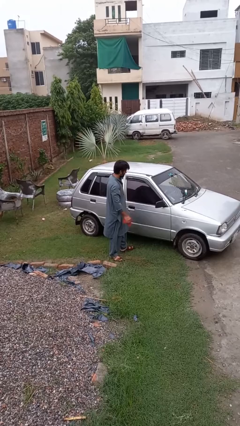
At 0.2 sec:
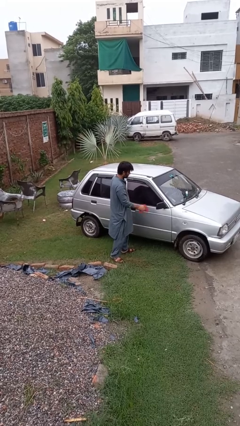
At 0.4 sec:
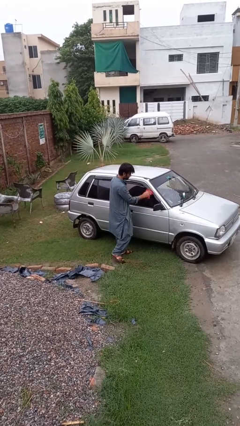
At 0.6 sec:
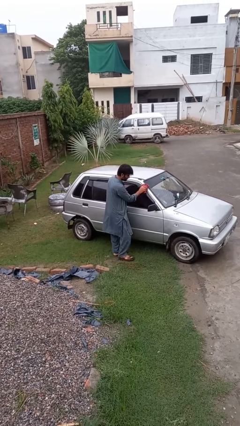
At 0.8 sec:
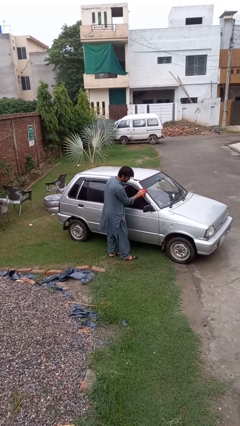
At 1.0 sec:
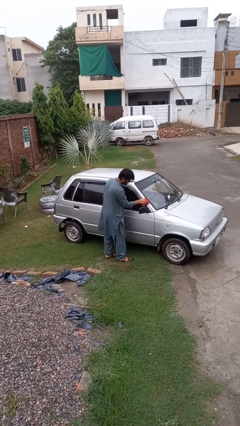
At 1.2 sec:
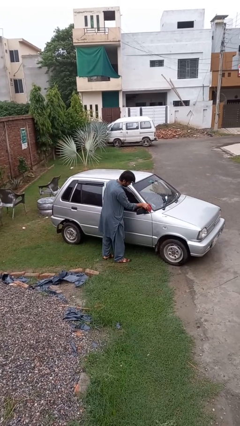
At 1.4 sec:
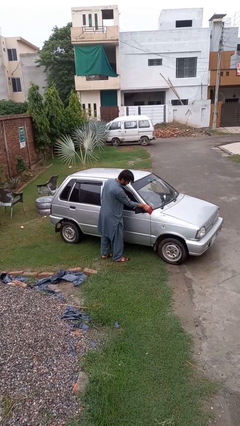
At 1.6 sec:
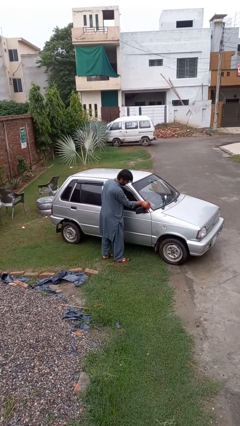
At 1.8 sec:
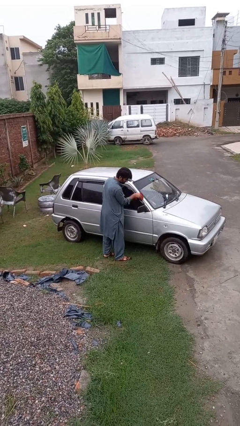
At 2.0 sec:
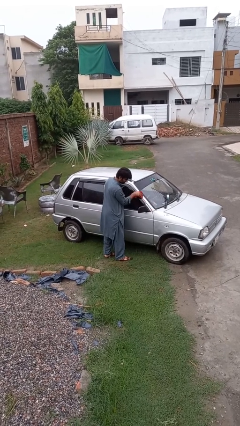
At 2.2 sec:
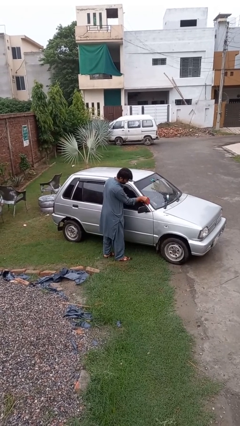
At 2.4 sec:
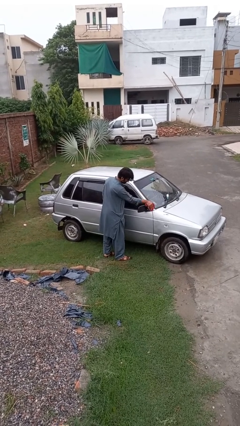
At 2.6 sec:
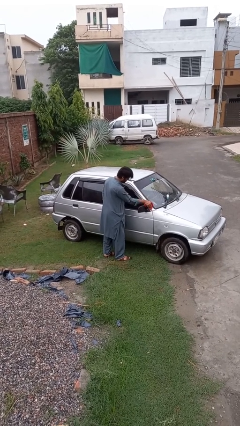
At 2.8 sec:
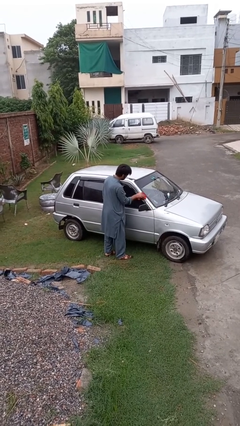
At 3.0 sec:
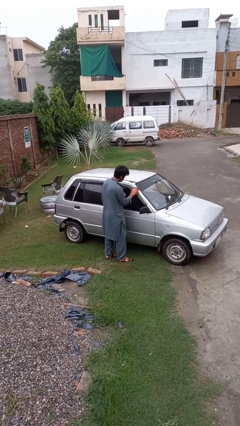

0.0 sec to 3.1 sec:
person polishes car with rag

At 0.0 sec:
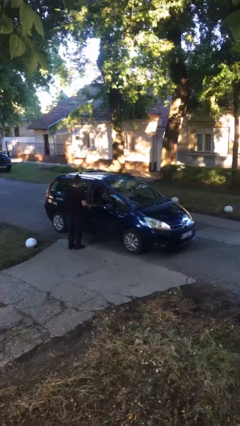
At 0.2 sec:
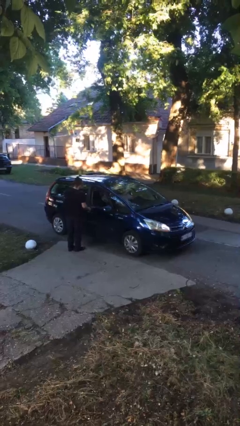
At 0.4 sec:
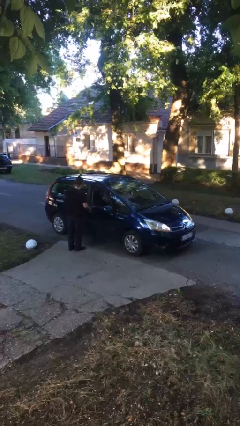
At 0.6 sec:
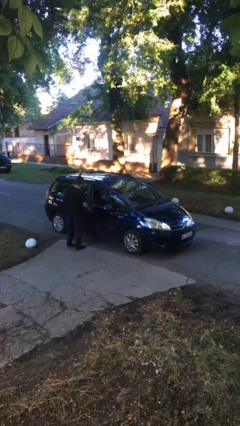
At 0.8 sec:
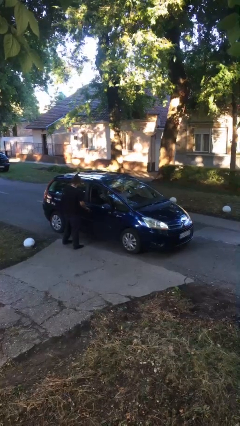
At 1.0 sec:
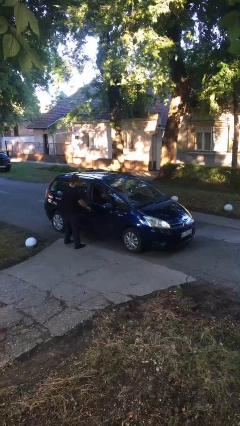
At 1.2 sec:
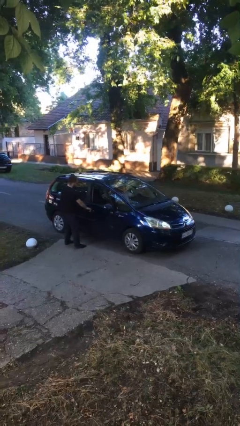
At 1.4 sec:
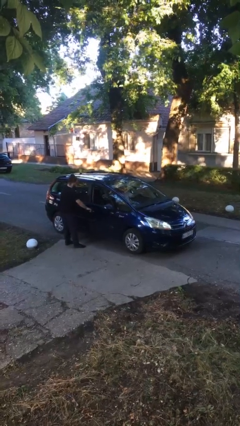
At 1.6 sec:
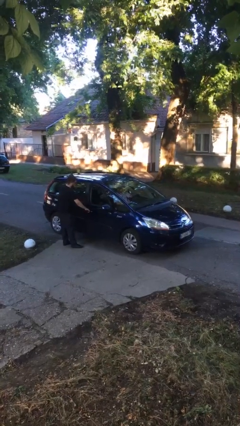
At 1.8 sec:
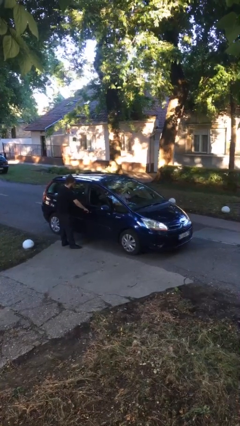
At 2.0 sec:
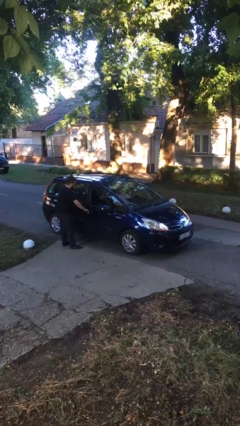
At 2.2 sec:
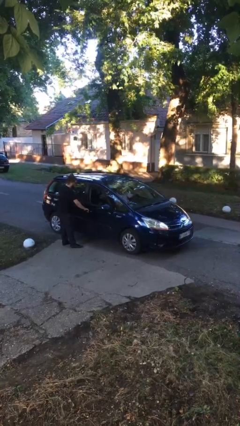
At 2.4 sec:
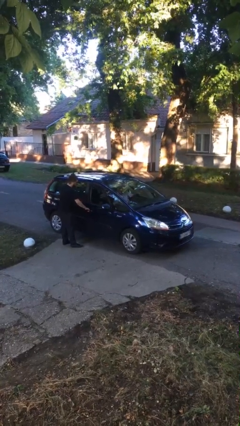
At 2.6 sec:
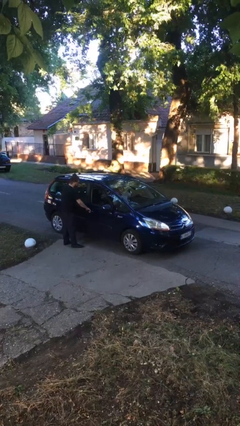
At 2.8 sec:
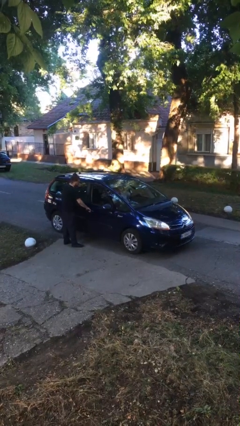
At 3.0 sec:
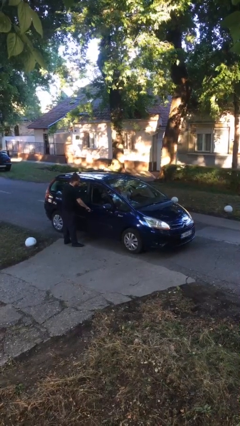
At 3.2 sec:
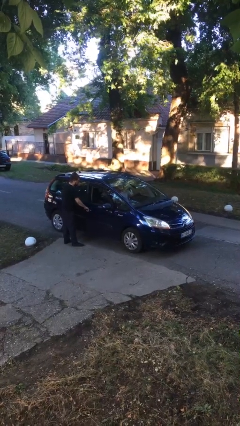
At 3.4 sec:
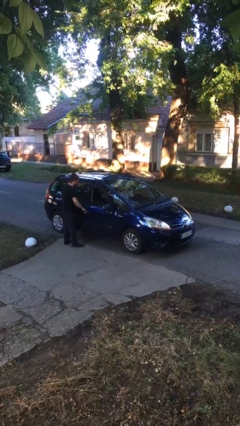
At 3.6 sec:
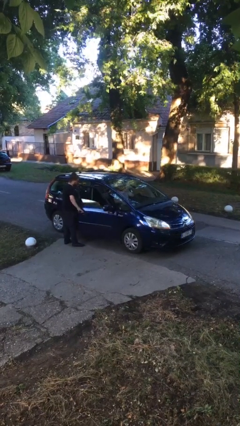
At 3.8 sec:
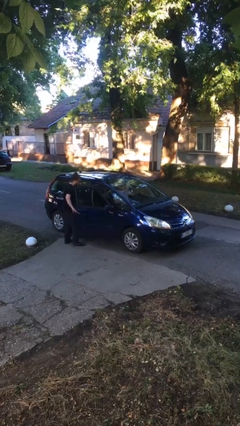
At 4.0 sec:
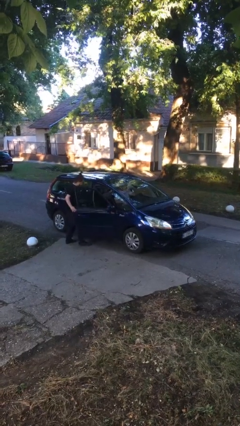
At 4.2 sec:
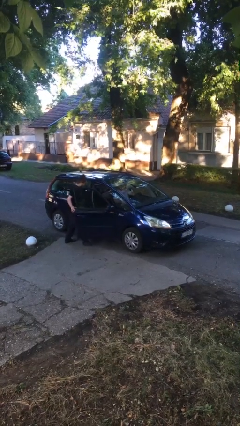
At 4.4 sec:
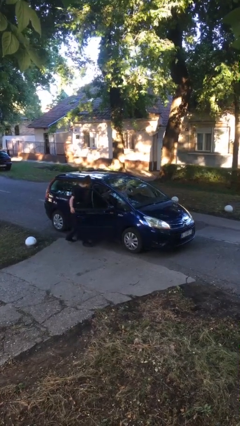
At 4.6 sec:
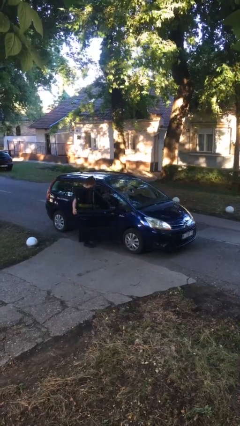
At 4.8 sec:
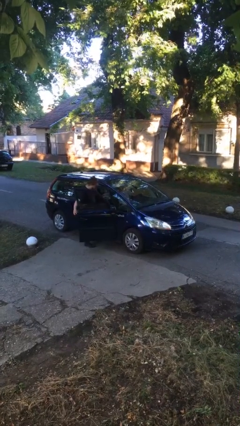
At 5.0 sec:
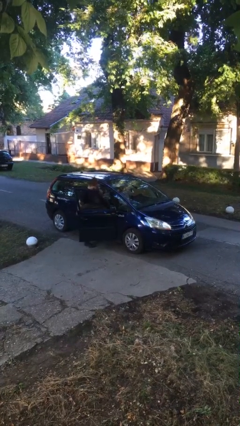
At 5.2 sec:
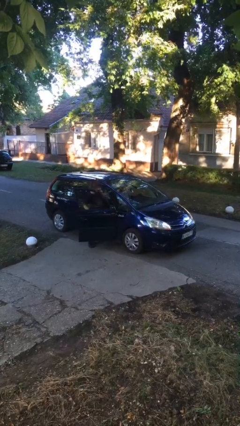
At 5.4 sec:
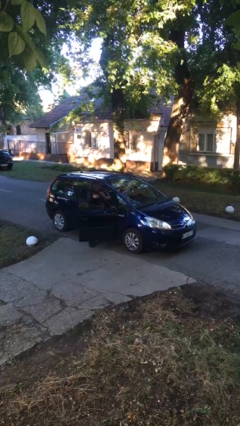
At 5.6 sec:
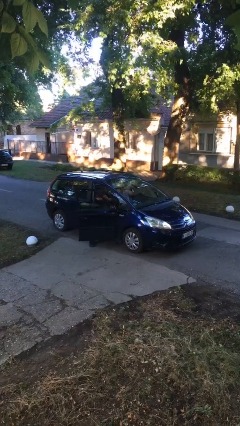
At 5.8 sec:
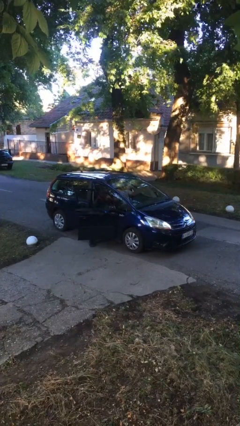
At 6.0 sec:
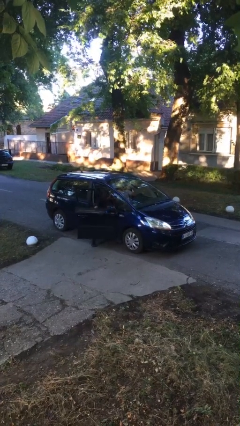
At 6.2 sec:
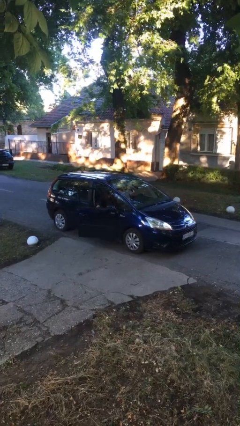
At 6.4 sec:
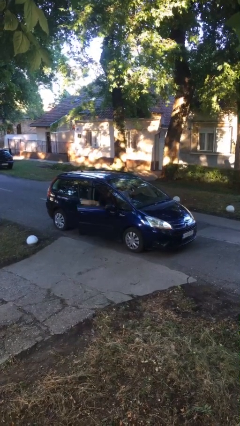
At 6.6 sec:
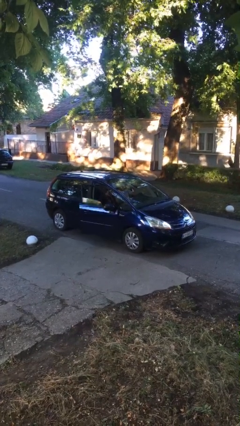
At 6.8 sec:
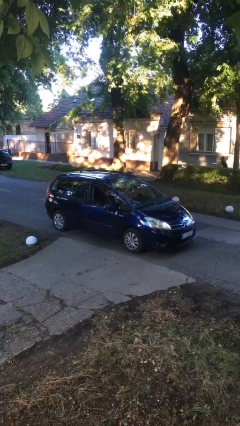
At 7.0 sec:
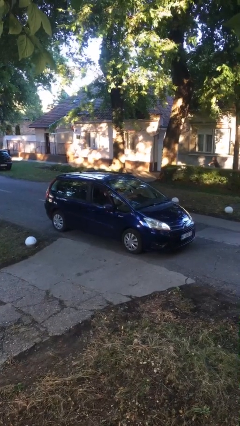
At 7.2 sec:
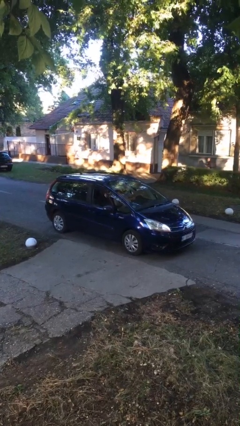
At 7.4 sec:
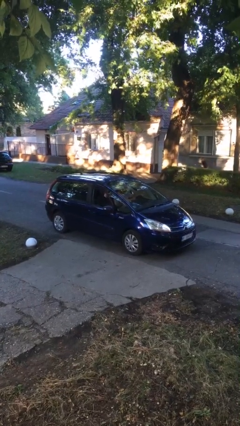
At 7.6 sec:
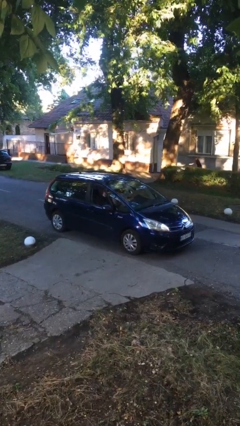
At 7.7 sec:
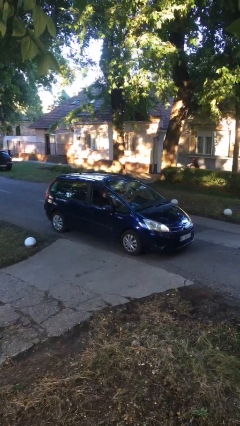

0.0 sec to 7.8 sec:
car picks up person

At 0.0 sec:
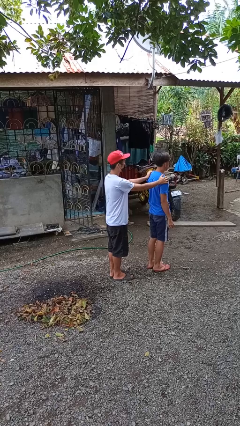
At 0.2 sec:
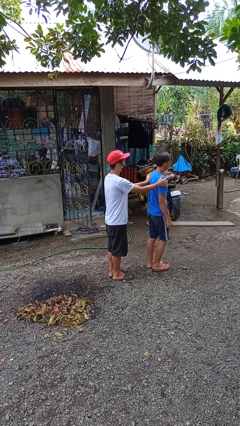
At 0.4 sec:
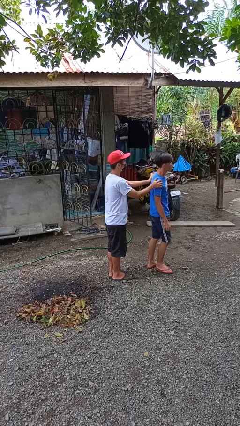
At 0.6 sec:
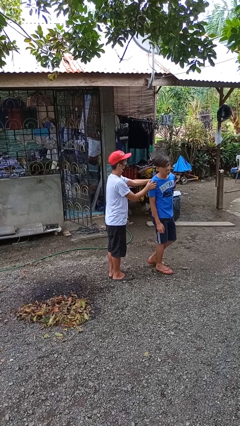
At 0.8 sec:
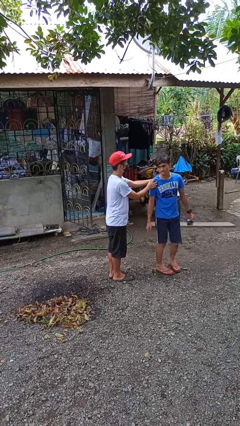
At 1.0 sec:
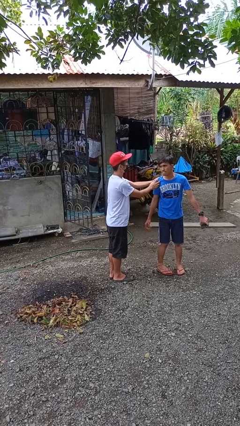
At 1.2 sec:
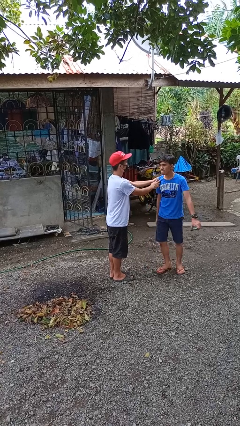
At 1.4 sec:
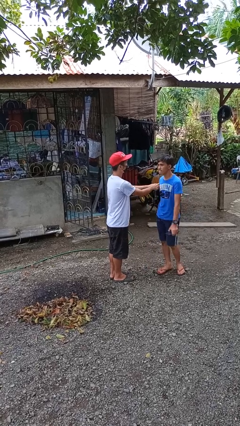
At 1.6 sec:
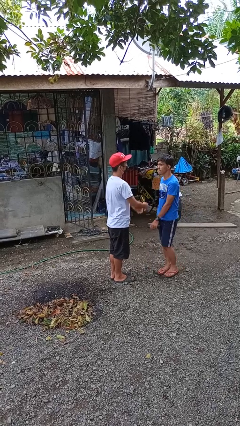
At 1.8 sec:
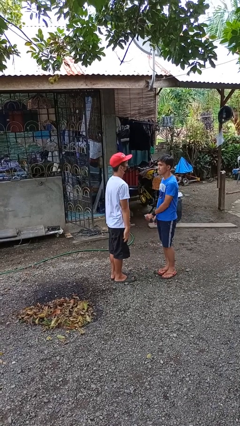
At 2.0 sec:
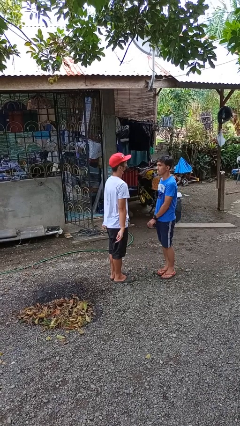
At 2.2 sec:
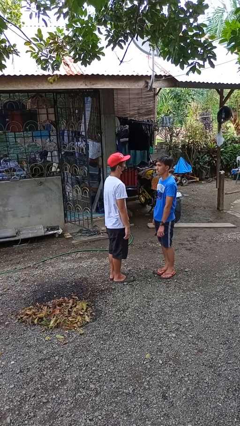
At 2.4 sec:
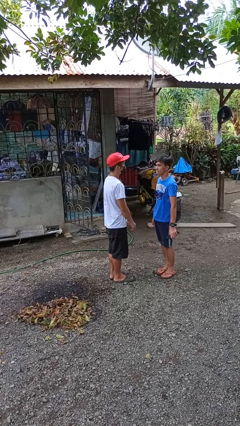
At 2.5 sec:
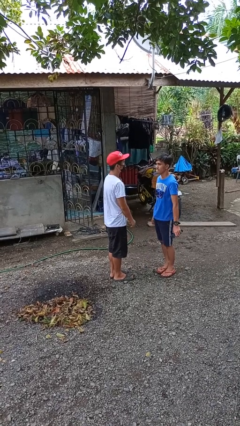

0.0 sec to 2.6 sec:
person spins person around

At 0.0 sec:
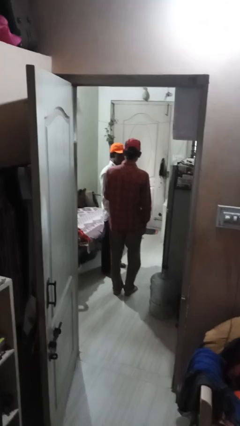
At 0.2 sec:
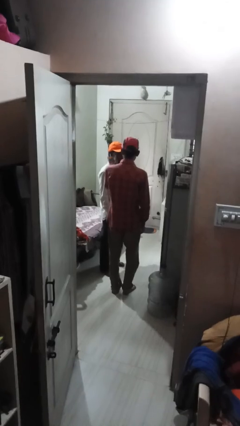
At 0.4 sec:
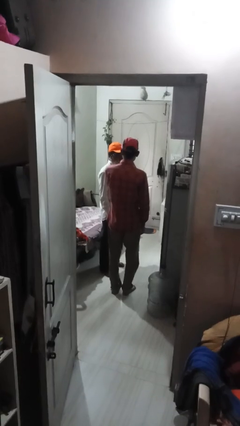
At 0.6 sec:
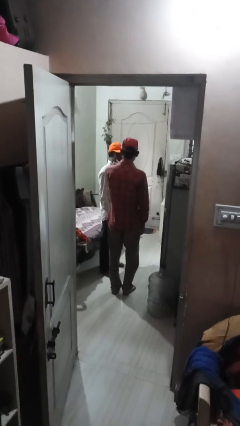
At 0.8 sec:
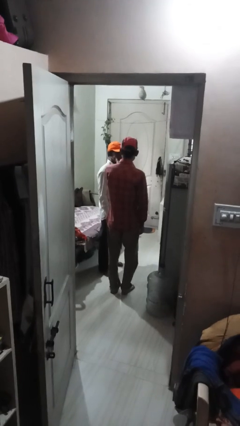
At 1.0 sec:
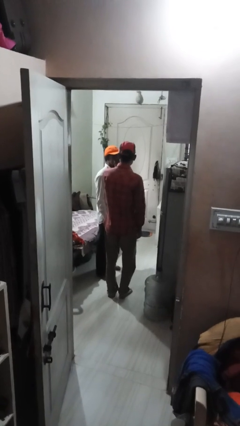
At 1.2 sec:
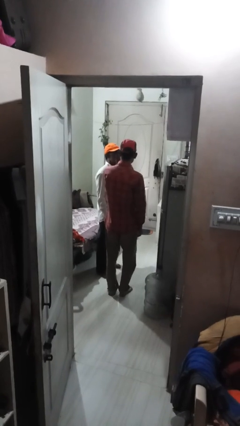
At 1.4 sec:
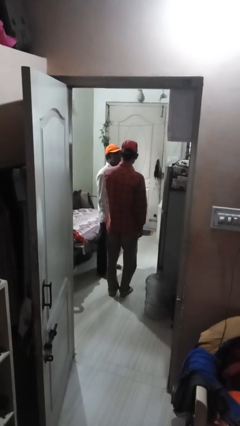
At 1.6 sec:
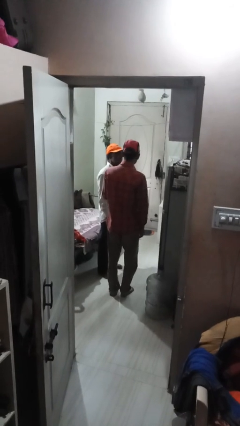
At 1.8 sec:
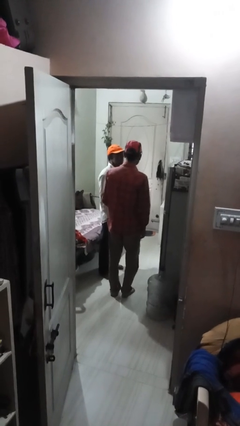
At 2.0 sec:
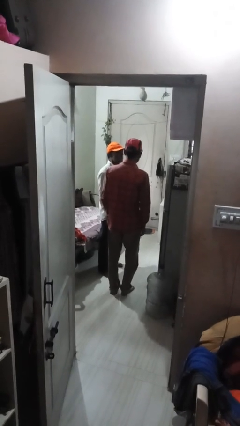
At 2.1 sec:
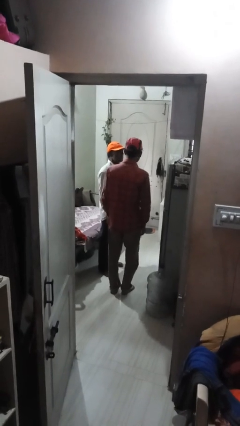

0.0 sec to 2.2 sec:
person touches face of person

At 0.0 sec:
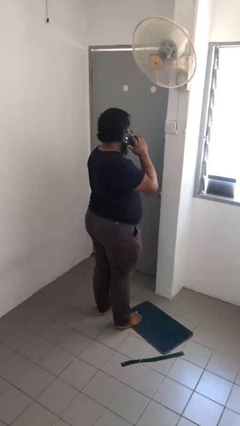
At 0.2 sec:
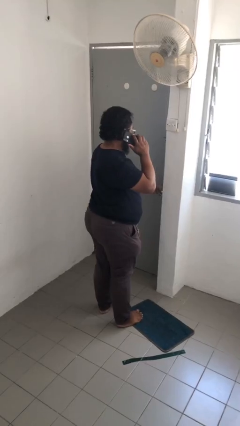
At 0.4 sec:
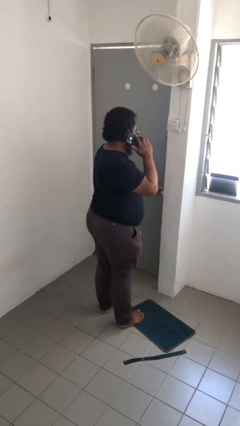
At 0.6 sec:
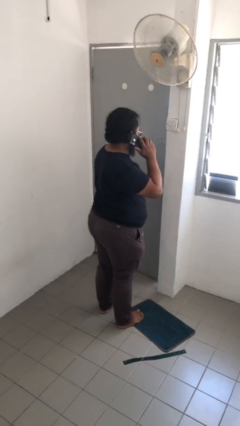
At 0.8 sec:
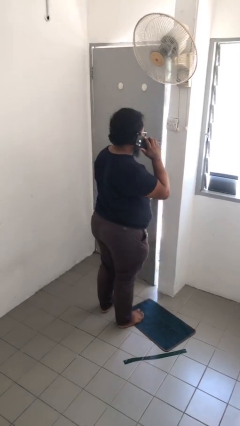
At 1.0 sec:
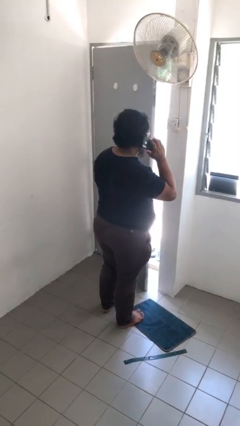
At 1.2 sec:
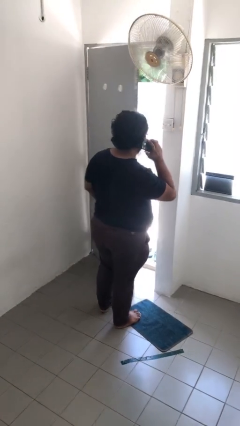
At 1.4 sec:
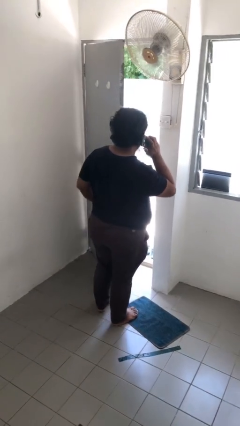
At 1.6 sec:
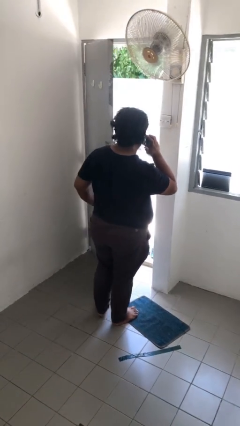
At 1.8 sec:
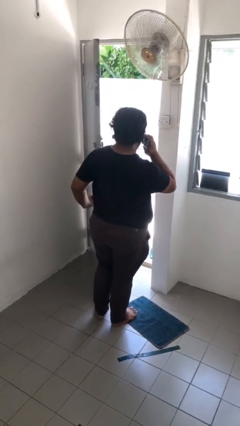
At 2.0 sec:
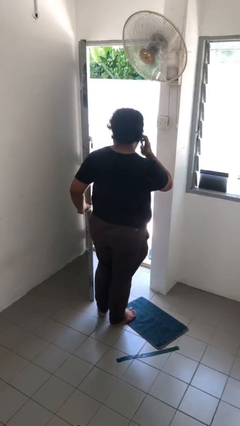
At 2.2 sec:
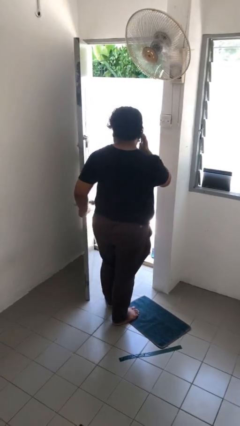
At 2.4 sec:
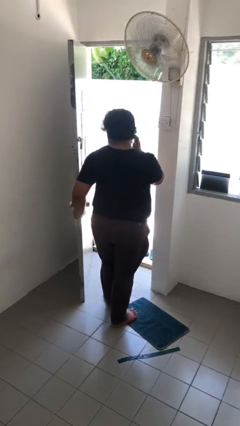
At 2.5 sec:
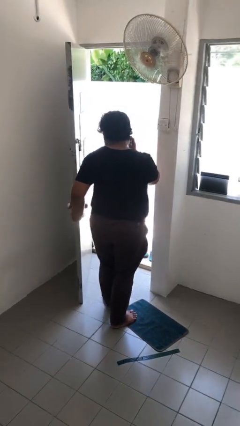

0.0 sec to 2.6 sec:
person opens facility door
